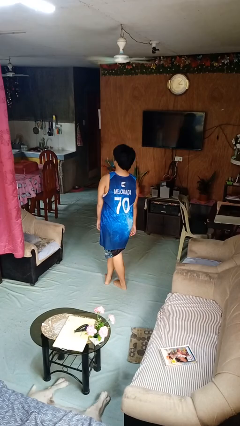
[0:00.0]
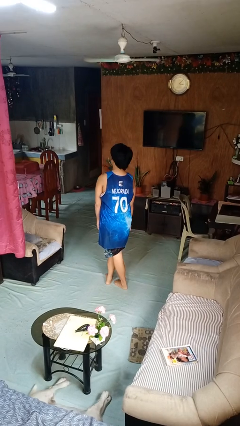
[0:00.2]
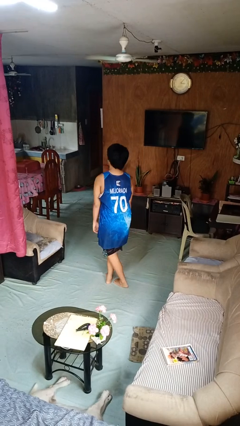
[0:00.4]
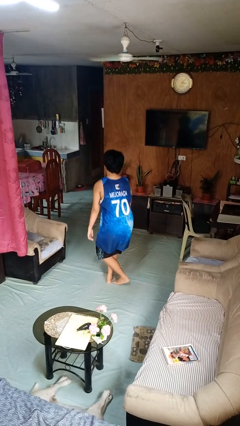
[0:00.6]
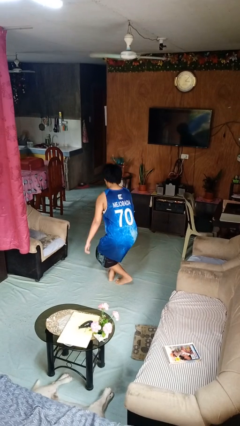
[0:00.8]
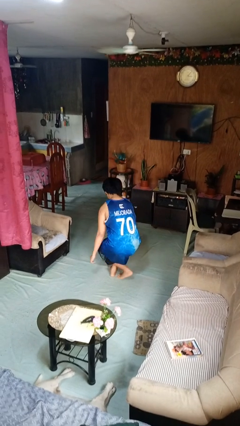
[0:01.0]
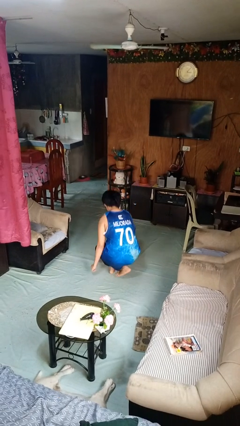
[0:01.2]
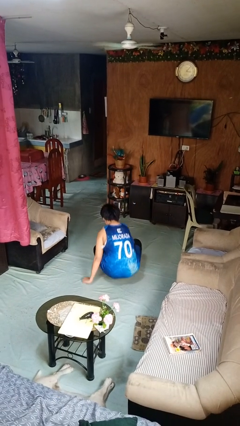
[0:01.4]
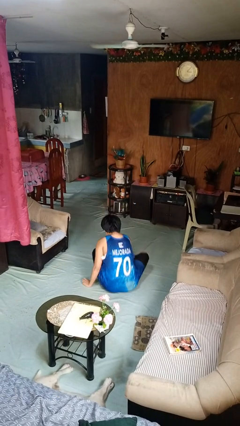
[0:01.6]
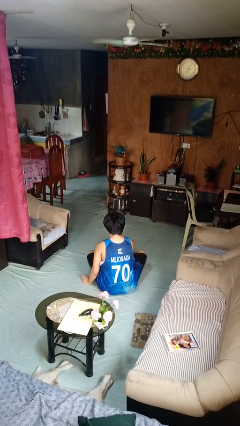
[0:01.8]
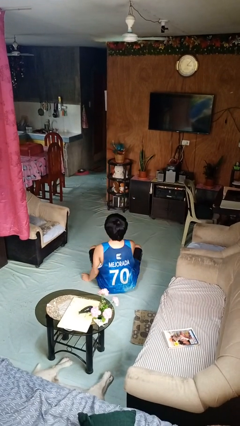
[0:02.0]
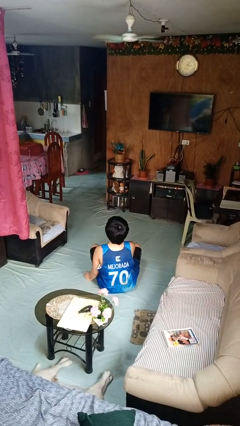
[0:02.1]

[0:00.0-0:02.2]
person sits crisscross

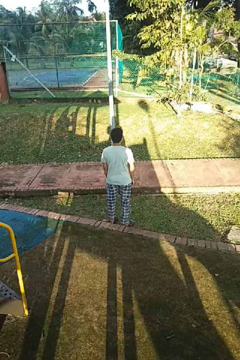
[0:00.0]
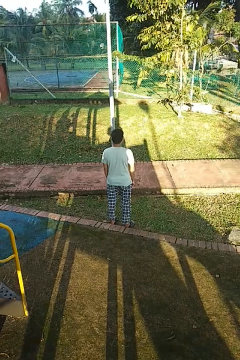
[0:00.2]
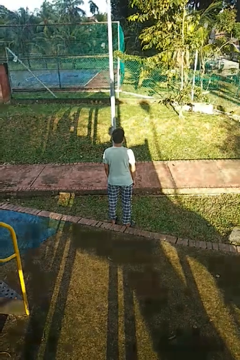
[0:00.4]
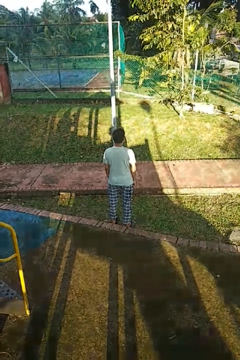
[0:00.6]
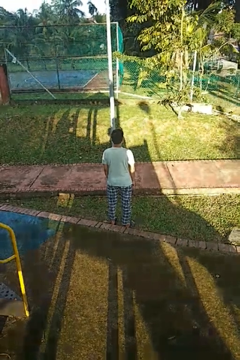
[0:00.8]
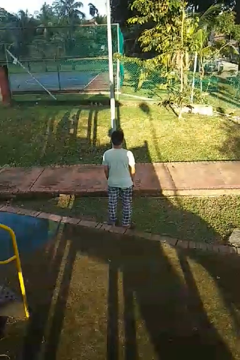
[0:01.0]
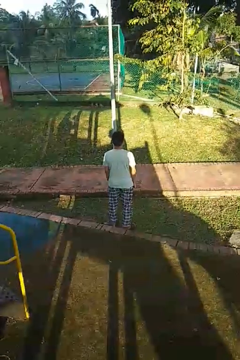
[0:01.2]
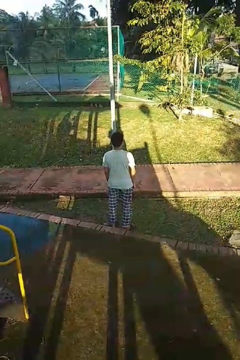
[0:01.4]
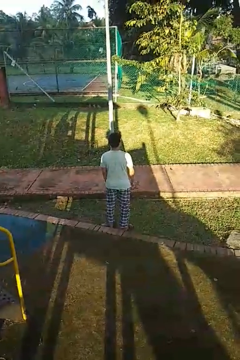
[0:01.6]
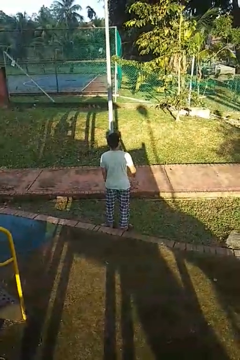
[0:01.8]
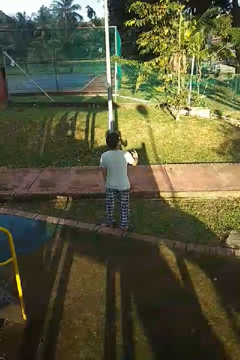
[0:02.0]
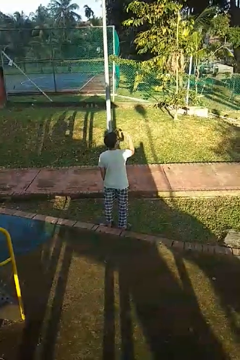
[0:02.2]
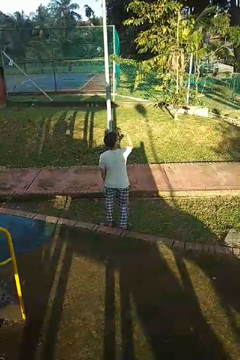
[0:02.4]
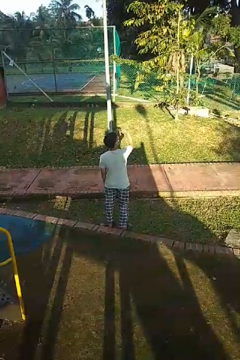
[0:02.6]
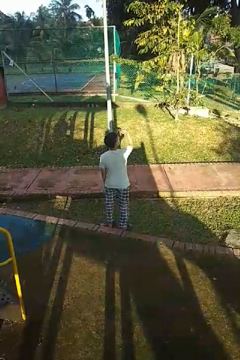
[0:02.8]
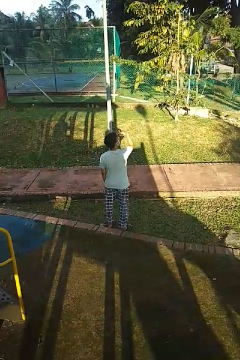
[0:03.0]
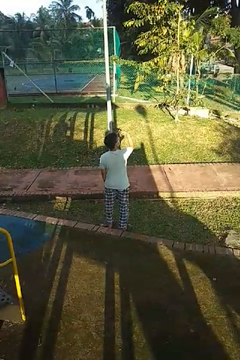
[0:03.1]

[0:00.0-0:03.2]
person gestures watch closely

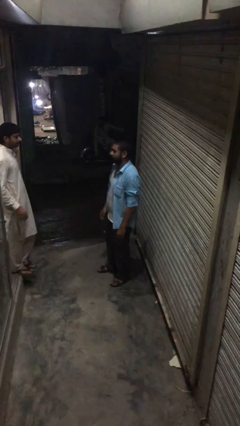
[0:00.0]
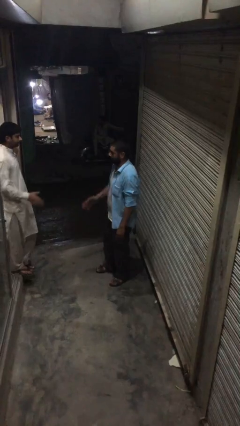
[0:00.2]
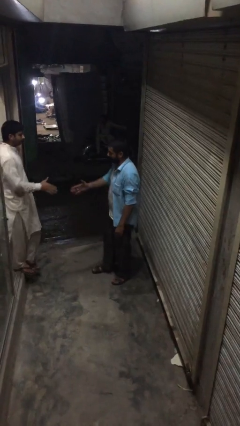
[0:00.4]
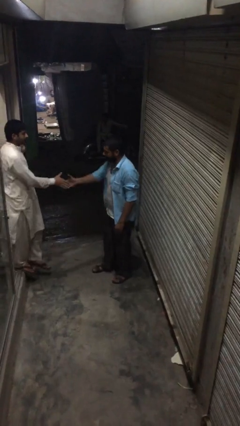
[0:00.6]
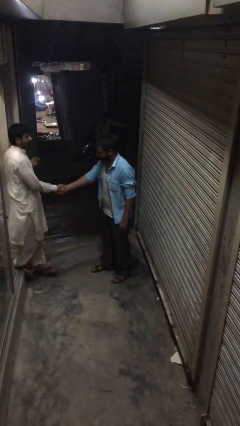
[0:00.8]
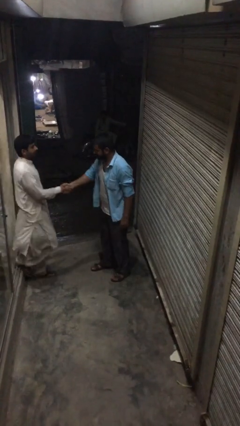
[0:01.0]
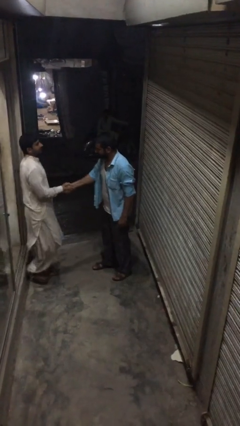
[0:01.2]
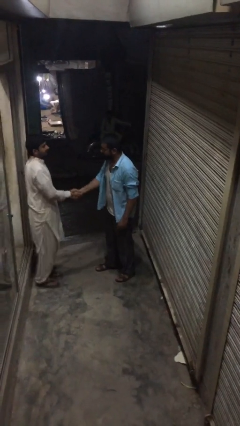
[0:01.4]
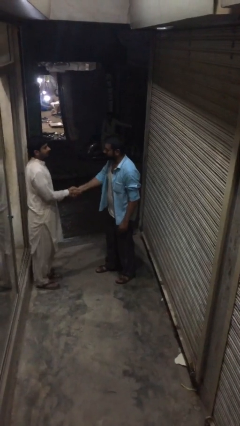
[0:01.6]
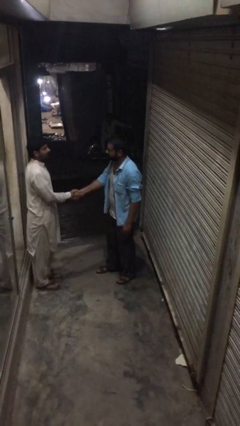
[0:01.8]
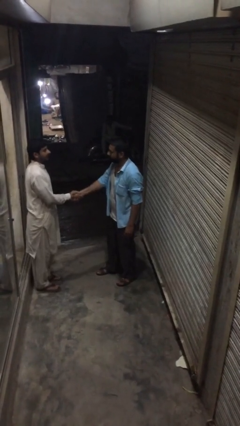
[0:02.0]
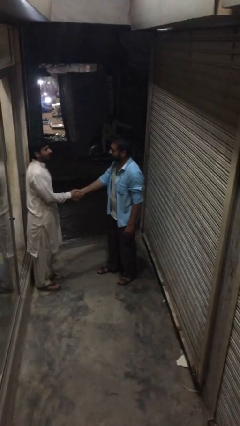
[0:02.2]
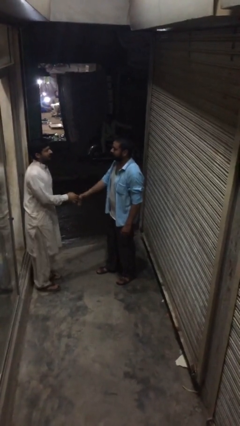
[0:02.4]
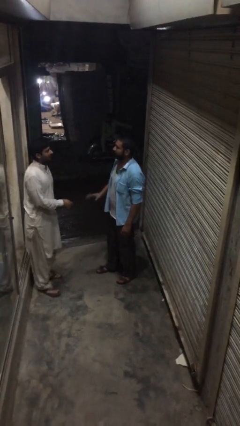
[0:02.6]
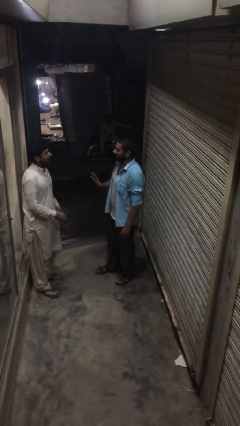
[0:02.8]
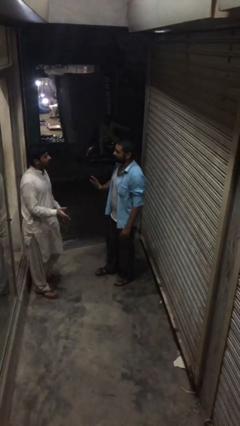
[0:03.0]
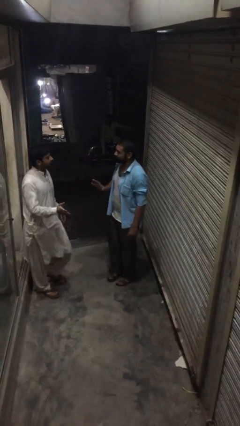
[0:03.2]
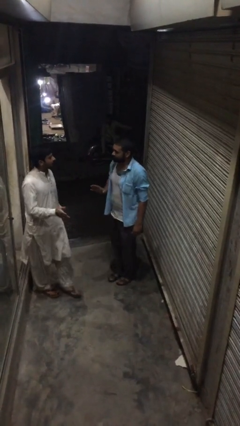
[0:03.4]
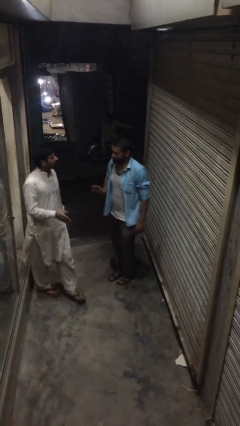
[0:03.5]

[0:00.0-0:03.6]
person shakes hand

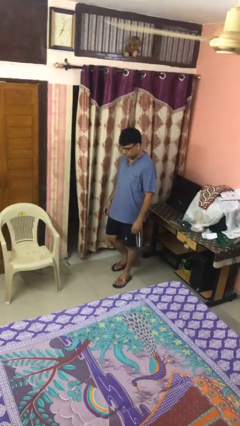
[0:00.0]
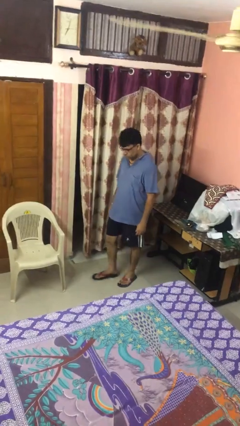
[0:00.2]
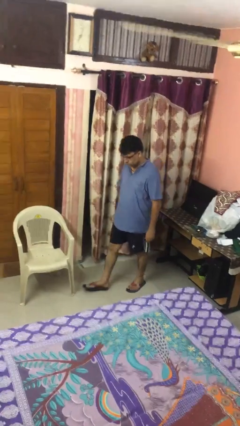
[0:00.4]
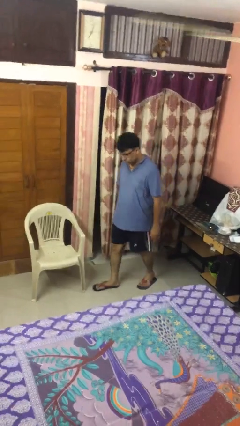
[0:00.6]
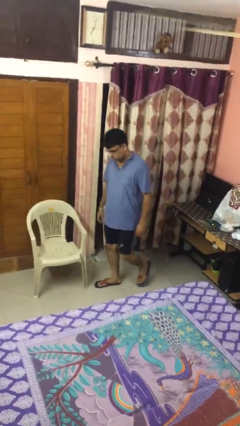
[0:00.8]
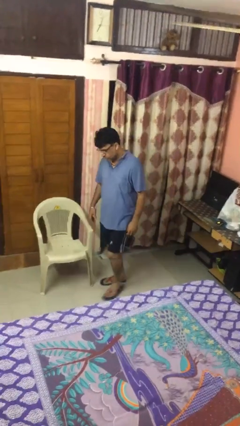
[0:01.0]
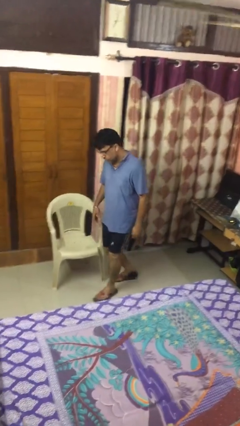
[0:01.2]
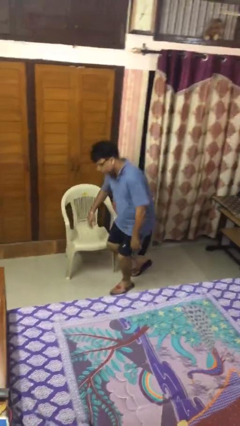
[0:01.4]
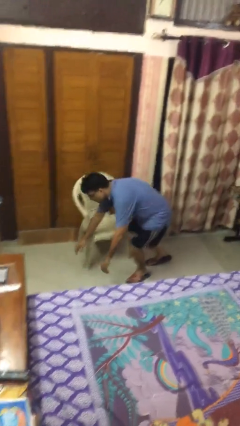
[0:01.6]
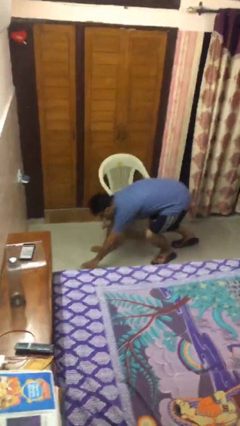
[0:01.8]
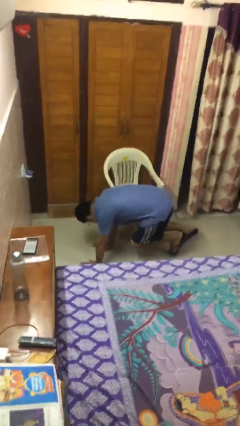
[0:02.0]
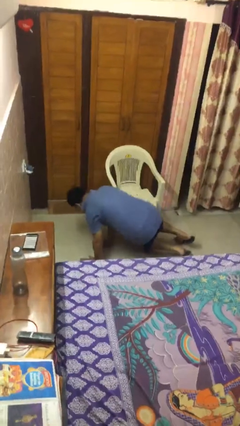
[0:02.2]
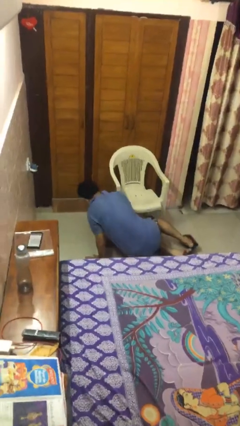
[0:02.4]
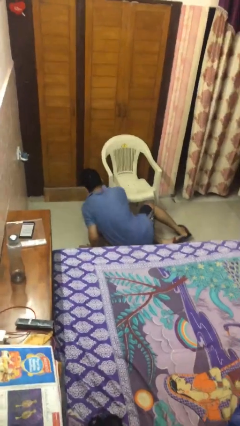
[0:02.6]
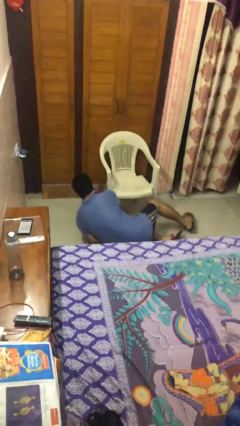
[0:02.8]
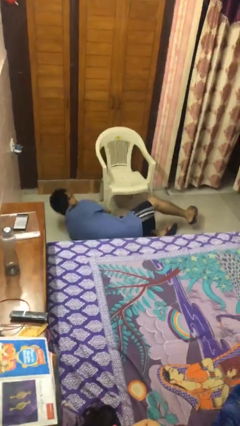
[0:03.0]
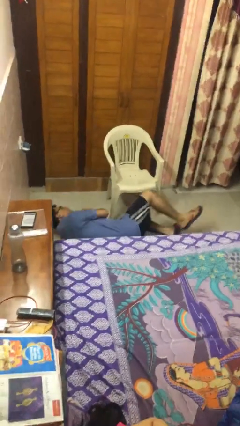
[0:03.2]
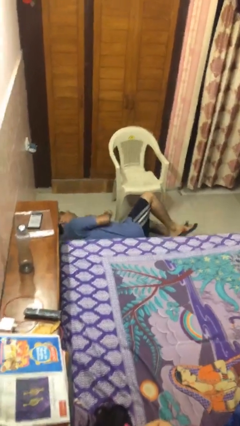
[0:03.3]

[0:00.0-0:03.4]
person trips on object on floor

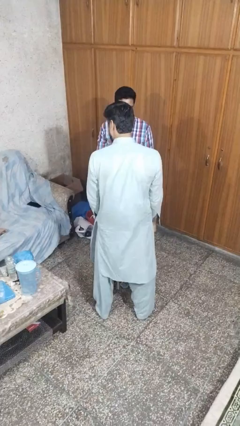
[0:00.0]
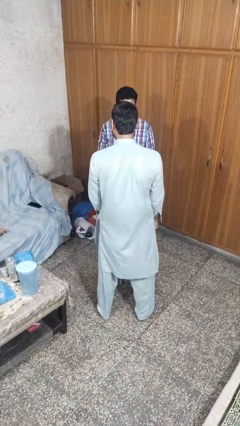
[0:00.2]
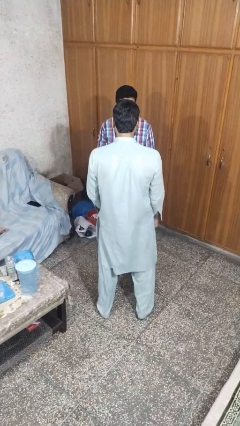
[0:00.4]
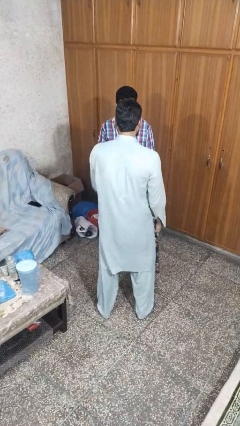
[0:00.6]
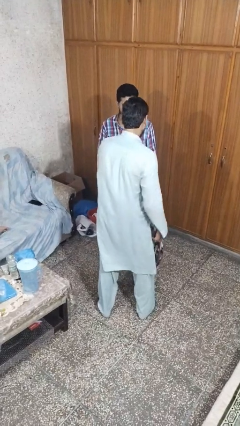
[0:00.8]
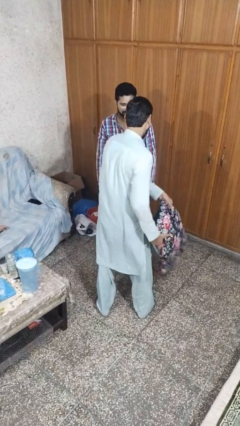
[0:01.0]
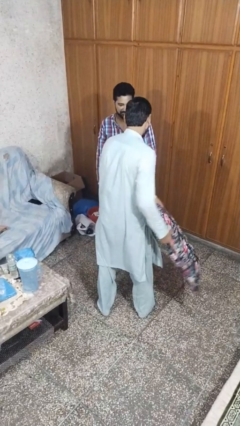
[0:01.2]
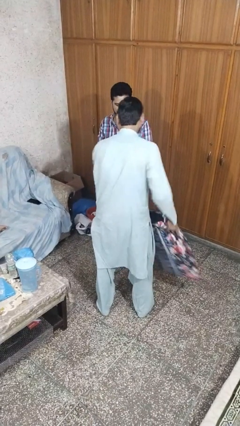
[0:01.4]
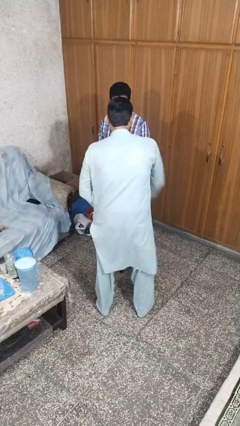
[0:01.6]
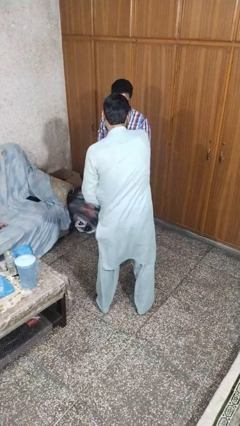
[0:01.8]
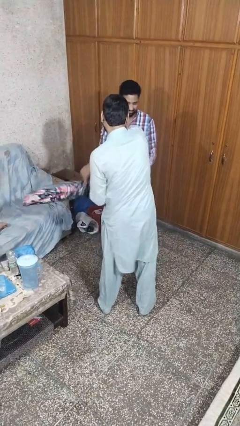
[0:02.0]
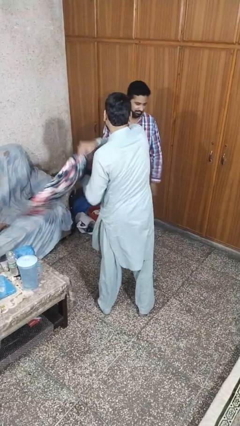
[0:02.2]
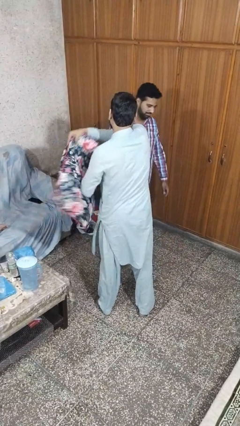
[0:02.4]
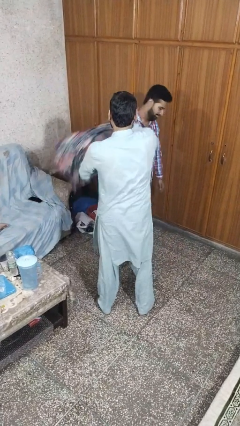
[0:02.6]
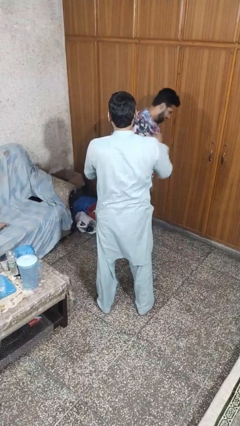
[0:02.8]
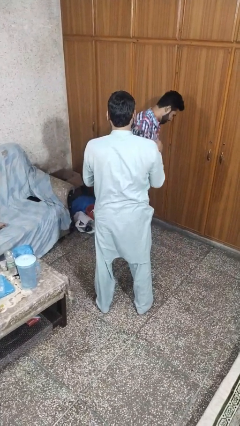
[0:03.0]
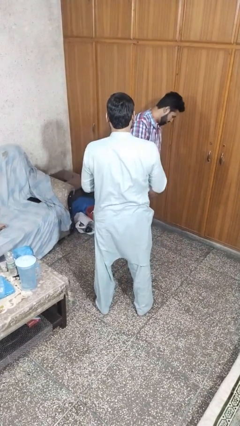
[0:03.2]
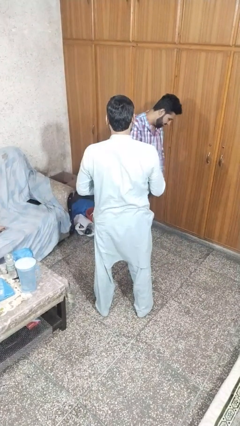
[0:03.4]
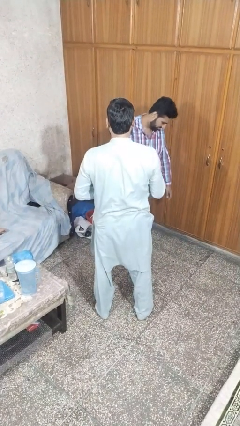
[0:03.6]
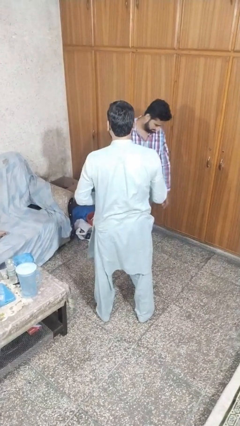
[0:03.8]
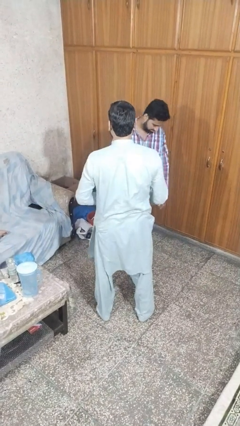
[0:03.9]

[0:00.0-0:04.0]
person hits person with pillow

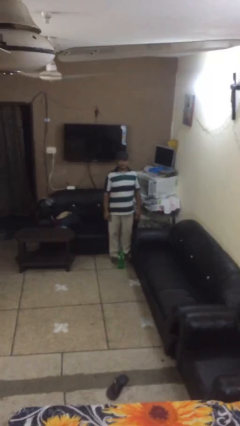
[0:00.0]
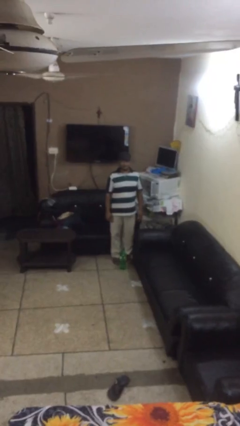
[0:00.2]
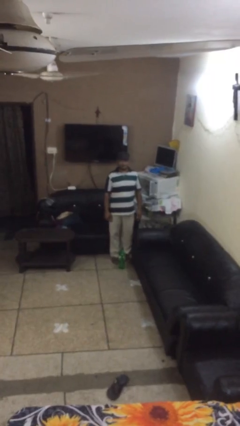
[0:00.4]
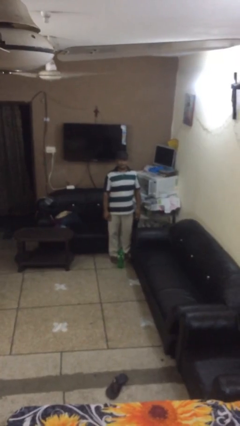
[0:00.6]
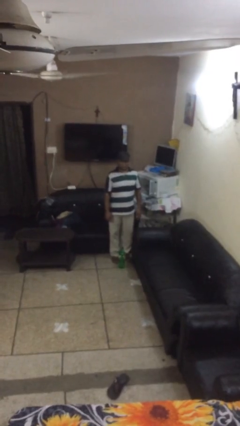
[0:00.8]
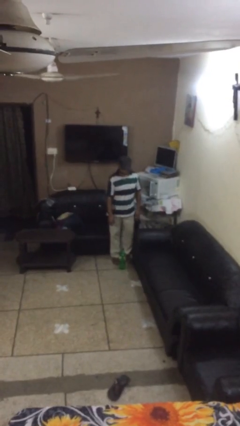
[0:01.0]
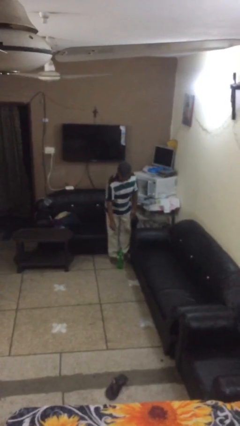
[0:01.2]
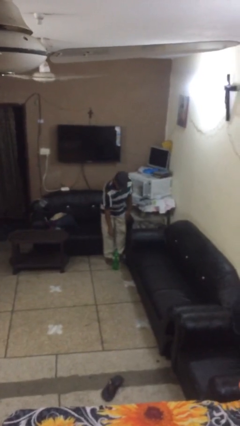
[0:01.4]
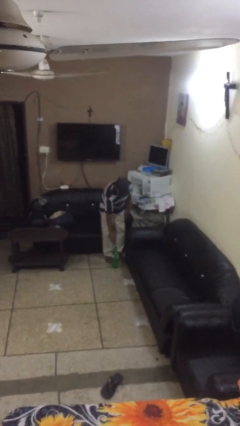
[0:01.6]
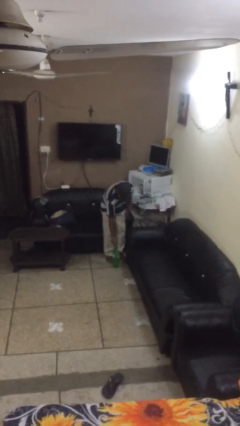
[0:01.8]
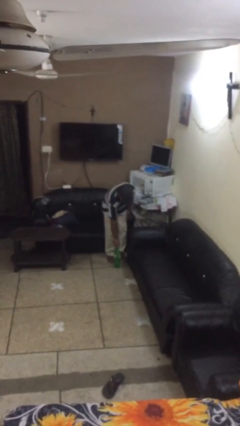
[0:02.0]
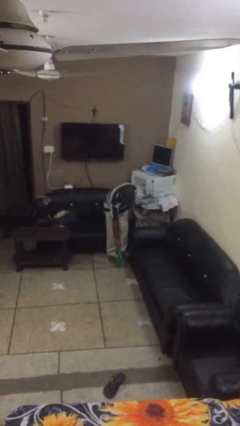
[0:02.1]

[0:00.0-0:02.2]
person picks up object from floor
